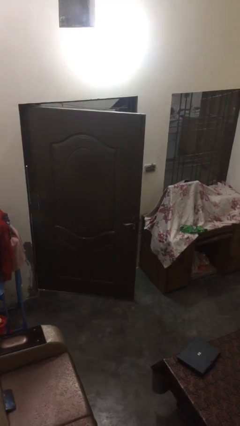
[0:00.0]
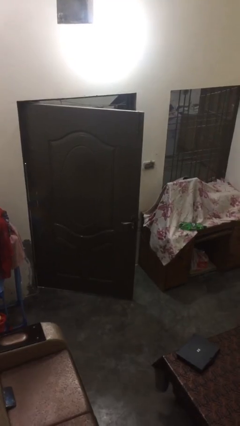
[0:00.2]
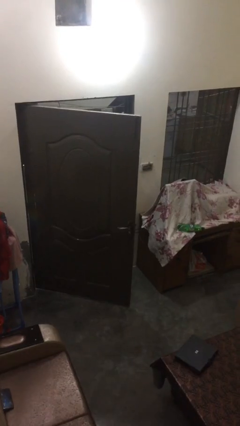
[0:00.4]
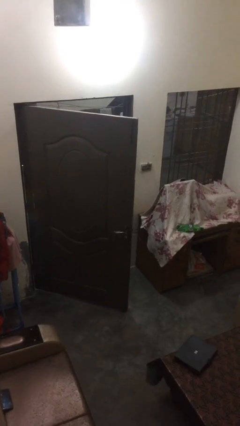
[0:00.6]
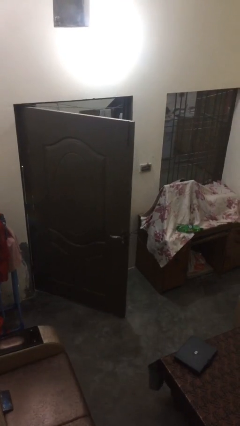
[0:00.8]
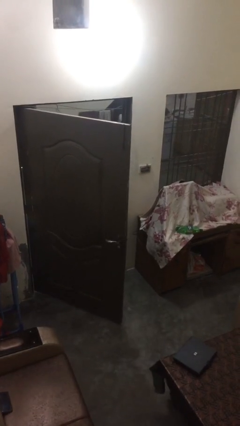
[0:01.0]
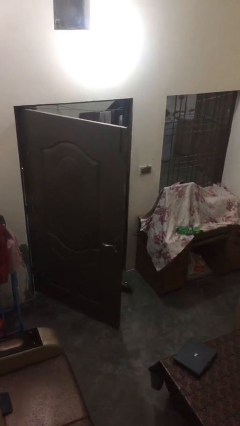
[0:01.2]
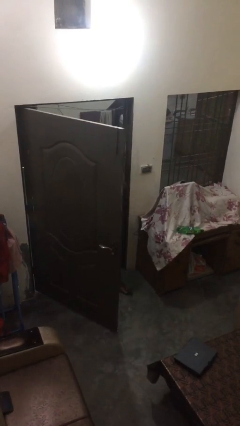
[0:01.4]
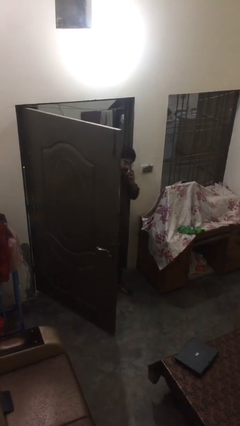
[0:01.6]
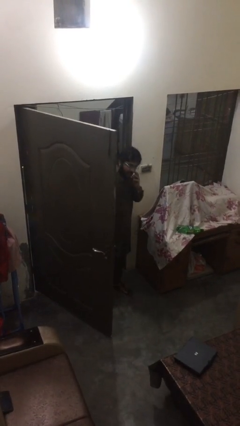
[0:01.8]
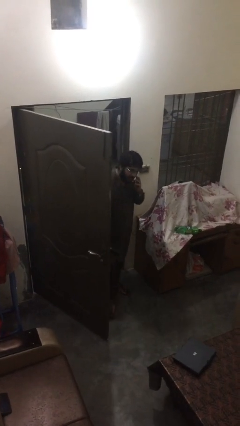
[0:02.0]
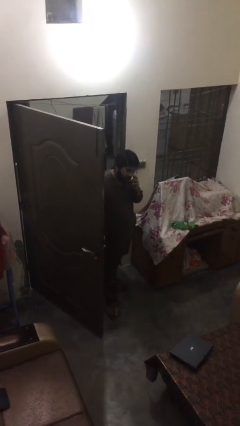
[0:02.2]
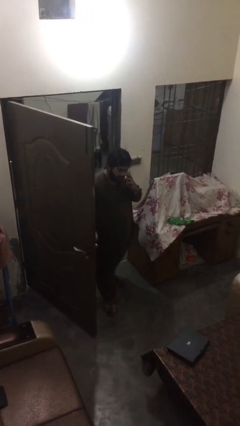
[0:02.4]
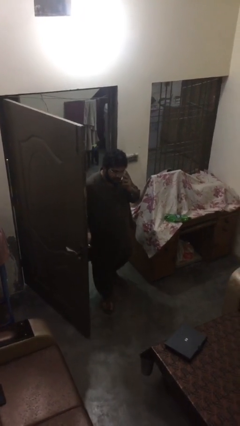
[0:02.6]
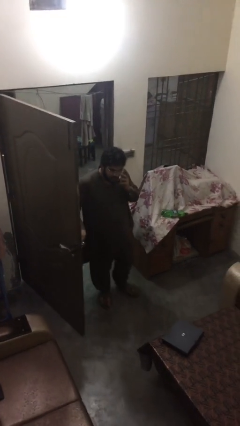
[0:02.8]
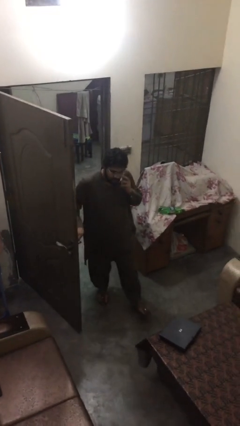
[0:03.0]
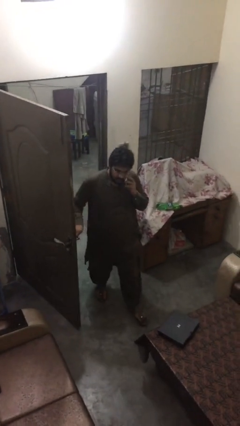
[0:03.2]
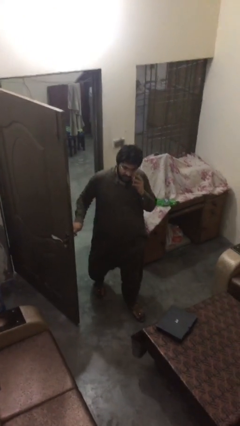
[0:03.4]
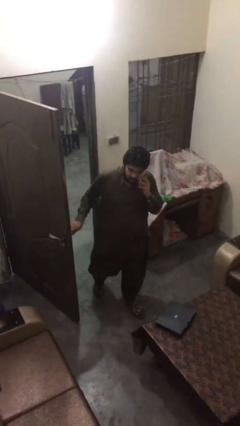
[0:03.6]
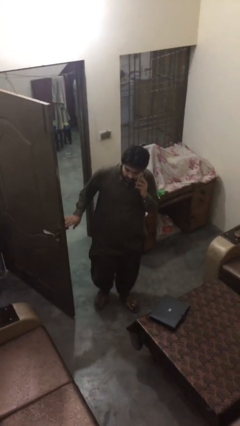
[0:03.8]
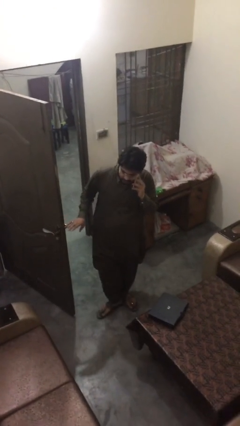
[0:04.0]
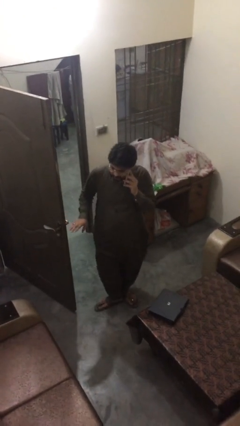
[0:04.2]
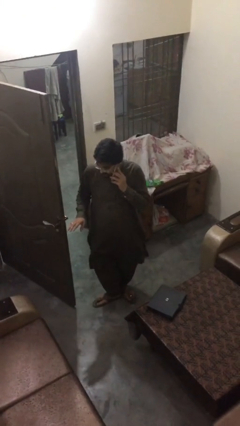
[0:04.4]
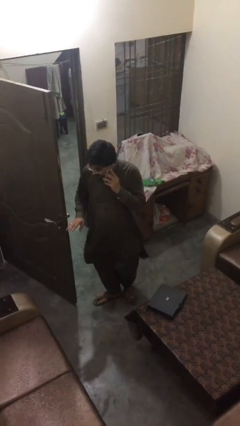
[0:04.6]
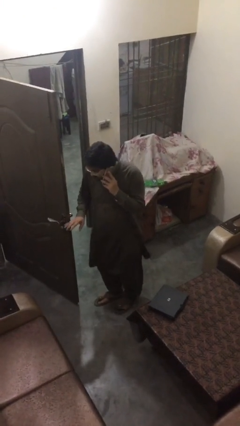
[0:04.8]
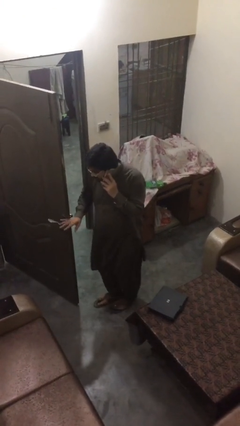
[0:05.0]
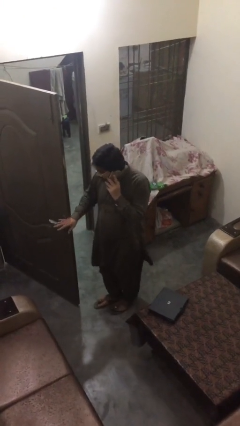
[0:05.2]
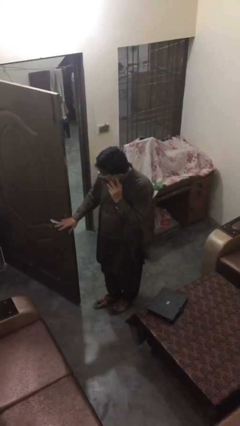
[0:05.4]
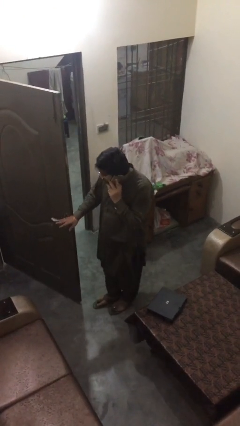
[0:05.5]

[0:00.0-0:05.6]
person enters scene through structure

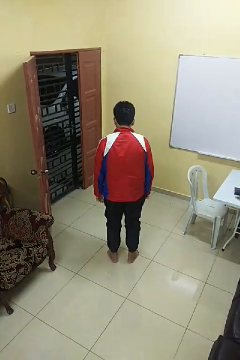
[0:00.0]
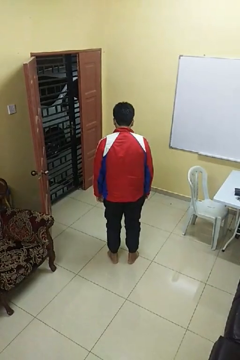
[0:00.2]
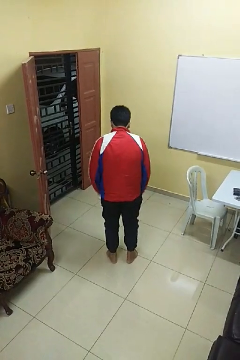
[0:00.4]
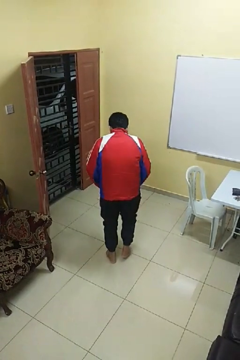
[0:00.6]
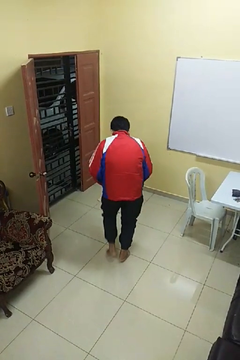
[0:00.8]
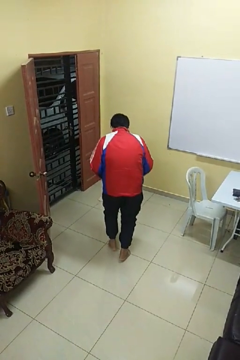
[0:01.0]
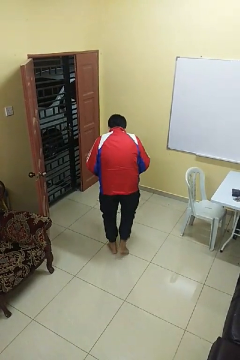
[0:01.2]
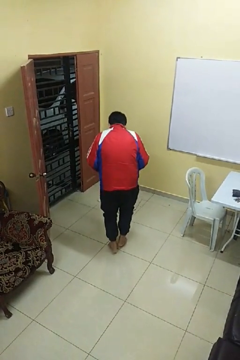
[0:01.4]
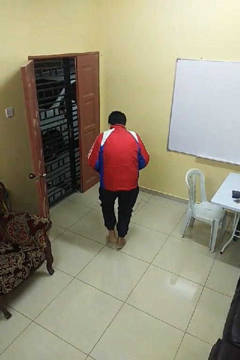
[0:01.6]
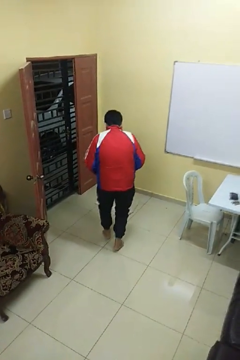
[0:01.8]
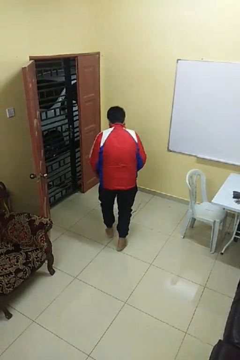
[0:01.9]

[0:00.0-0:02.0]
person walks tiptoe

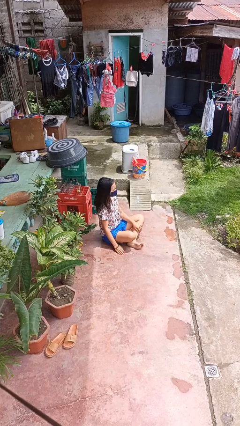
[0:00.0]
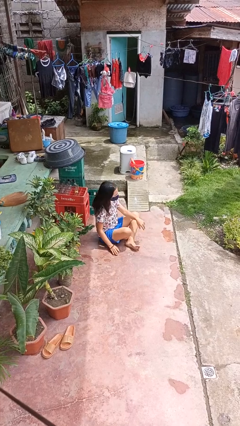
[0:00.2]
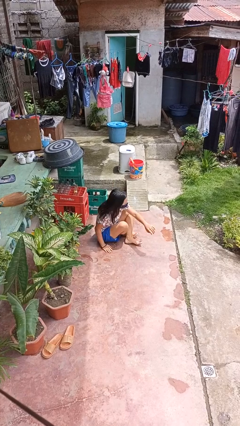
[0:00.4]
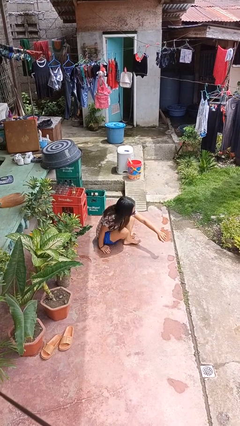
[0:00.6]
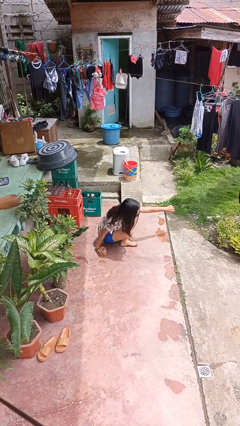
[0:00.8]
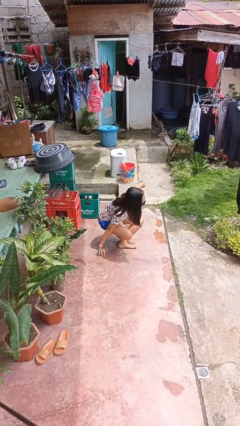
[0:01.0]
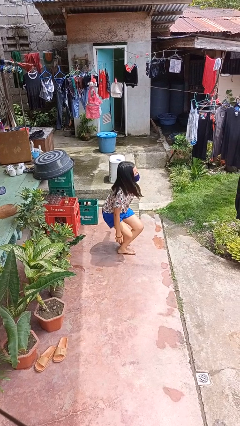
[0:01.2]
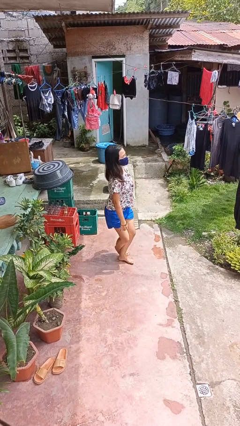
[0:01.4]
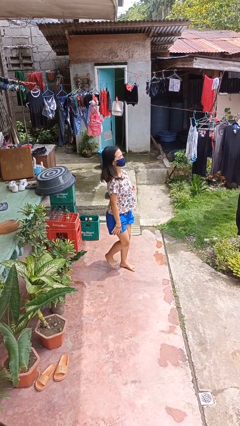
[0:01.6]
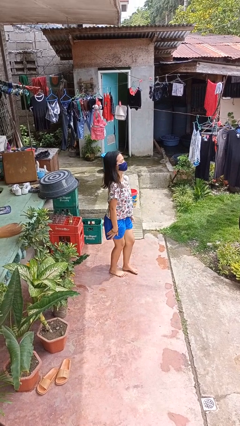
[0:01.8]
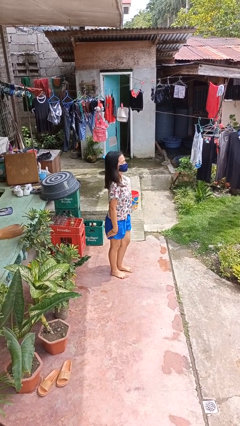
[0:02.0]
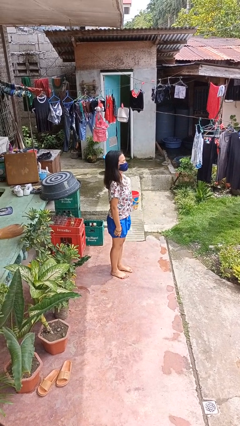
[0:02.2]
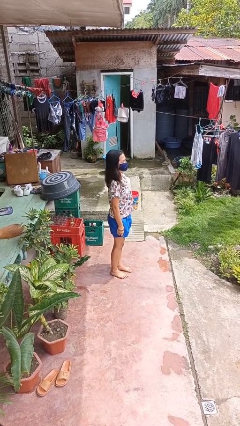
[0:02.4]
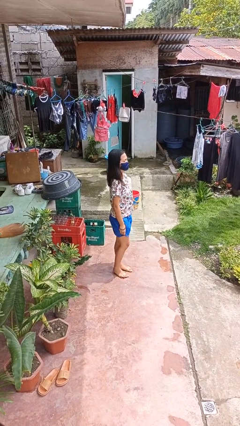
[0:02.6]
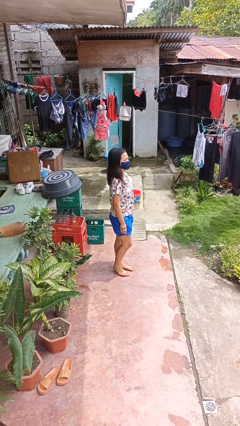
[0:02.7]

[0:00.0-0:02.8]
person stands up from floor

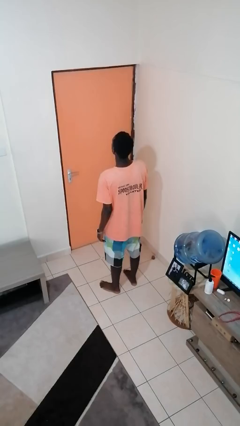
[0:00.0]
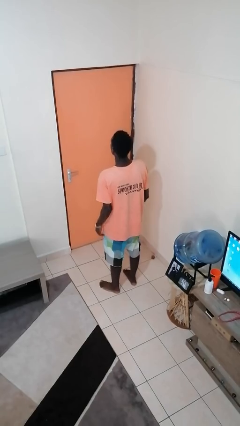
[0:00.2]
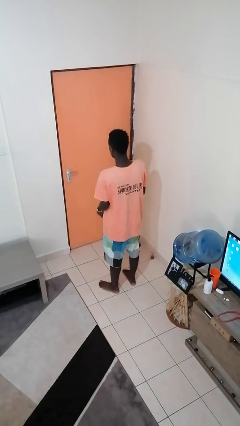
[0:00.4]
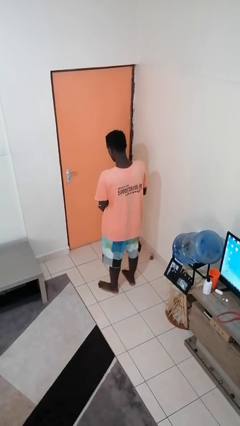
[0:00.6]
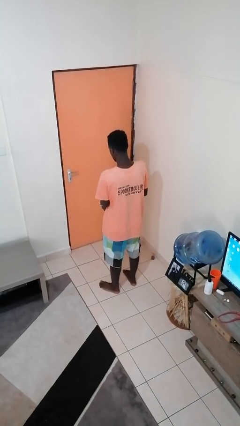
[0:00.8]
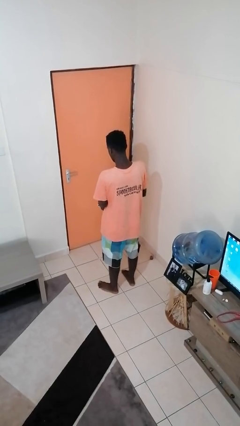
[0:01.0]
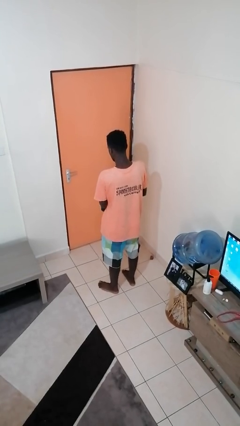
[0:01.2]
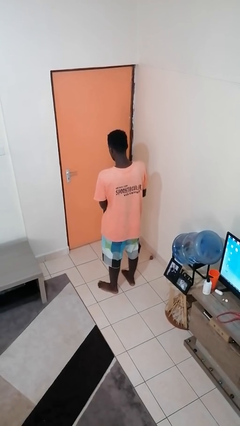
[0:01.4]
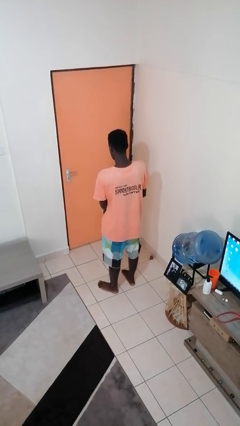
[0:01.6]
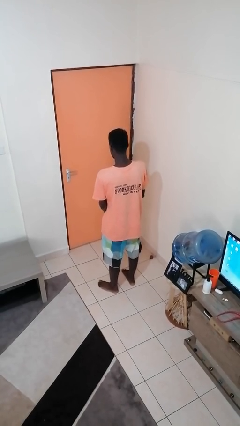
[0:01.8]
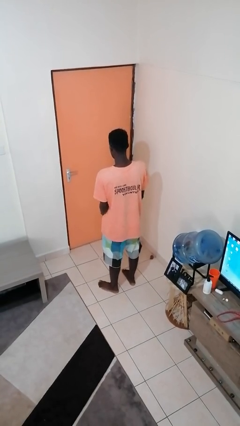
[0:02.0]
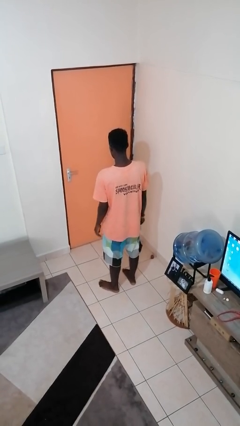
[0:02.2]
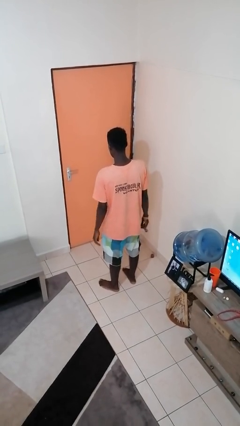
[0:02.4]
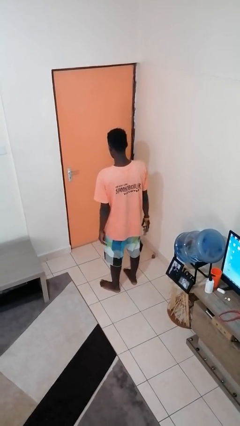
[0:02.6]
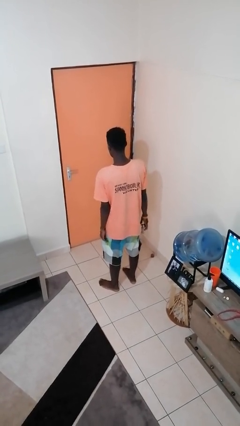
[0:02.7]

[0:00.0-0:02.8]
person takes off wristwatch

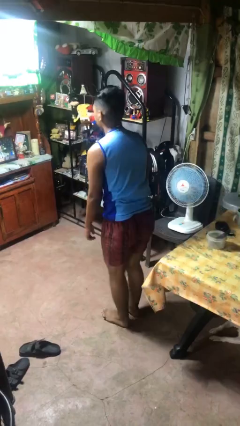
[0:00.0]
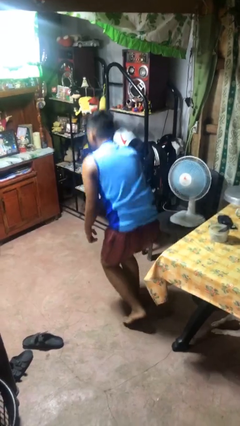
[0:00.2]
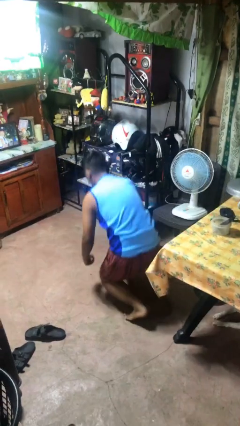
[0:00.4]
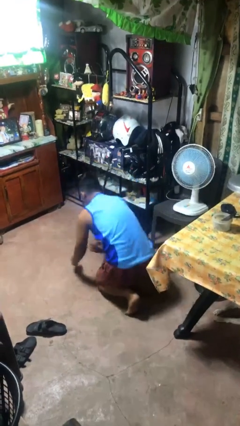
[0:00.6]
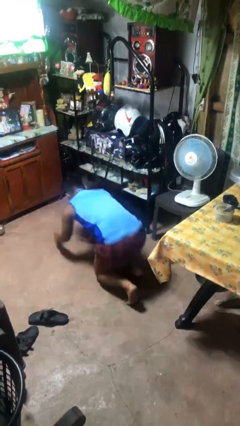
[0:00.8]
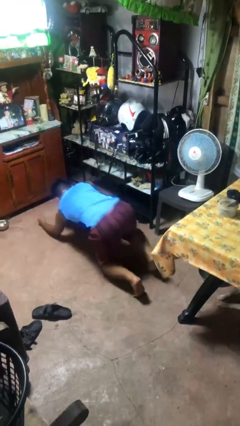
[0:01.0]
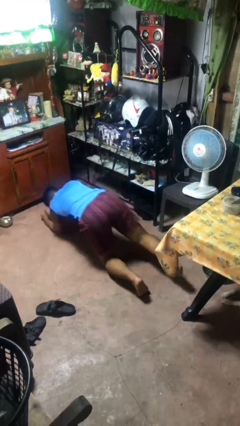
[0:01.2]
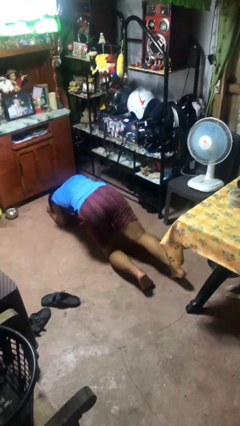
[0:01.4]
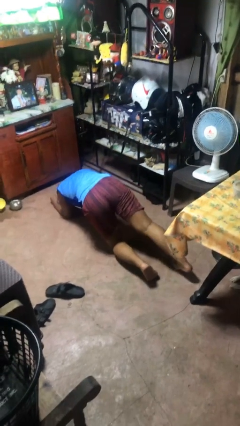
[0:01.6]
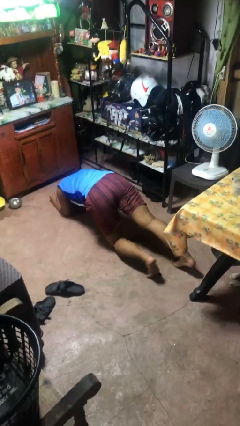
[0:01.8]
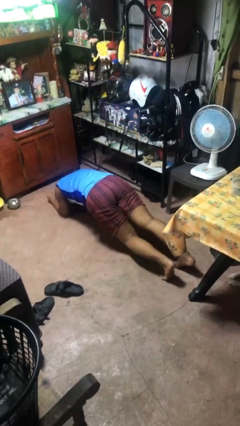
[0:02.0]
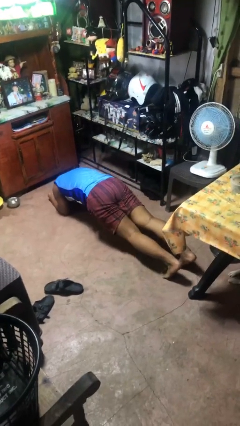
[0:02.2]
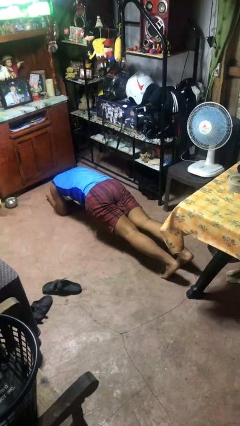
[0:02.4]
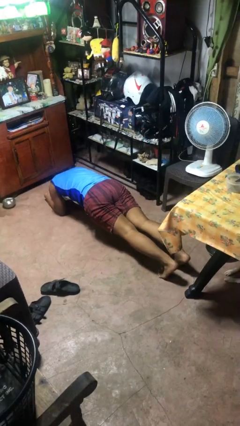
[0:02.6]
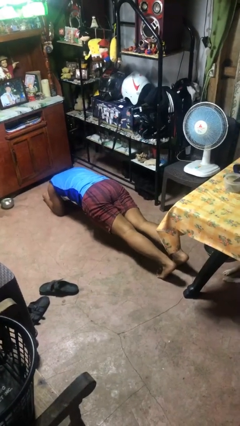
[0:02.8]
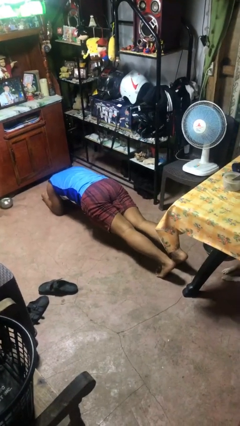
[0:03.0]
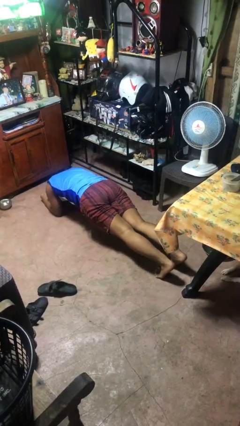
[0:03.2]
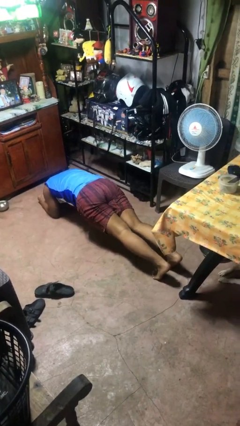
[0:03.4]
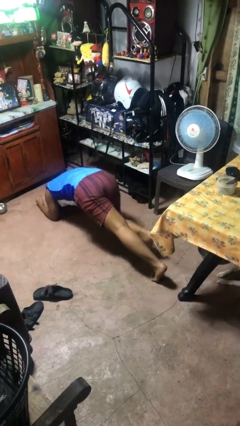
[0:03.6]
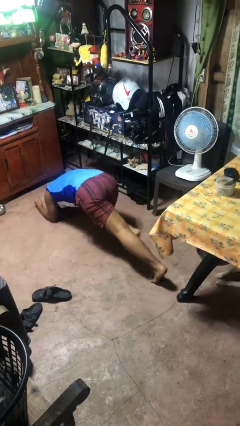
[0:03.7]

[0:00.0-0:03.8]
person exercises with plank

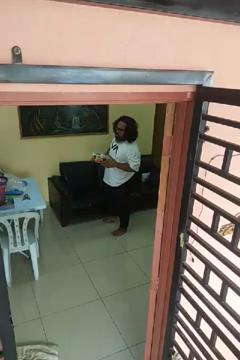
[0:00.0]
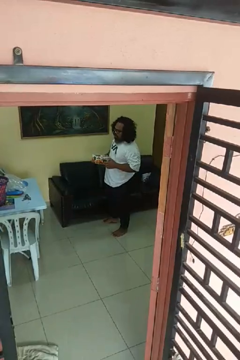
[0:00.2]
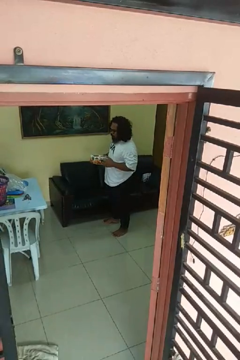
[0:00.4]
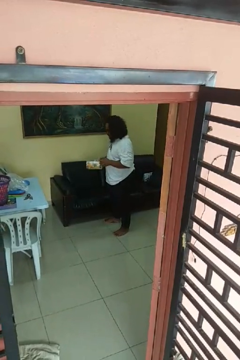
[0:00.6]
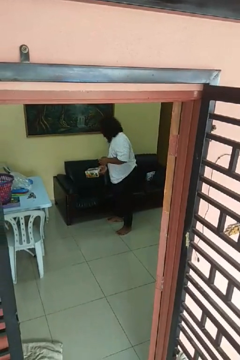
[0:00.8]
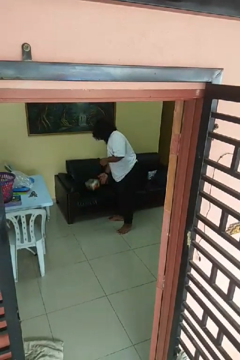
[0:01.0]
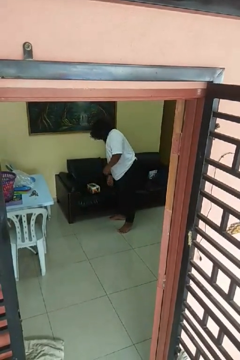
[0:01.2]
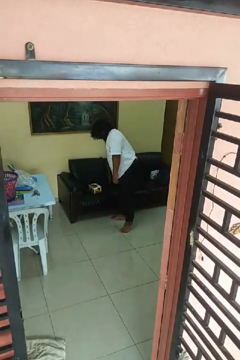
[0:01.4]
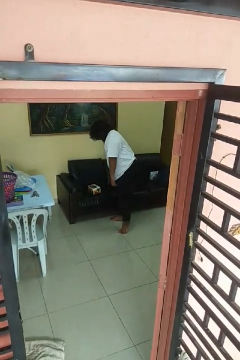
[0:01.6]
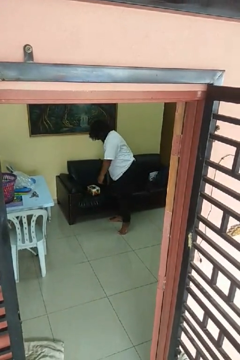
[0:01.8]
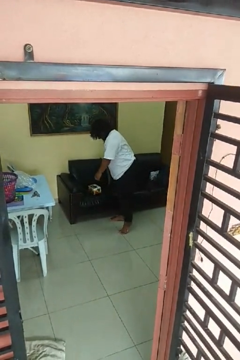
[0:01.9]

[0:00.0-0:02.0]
person puts down object on couch
